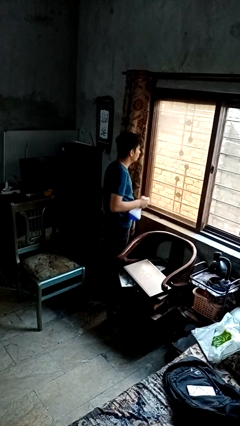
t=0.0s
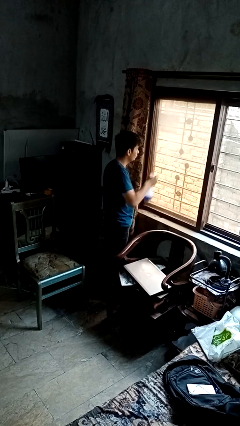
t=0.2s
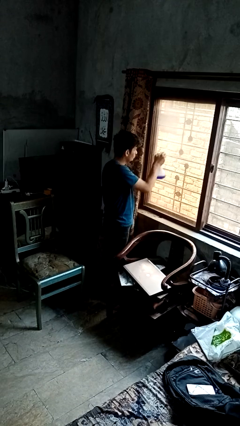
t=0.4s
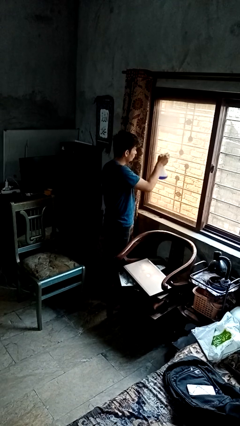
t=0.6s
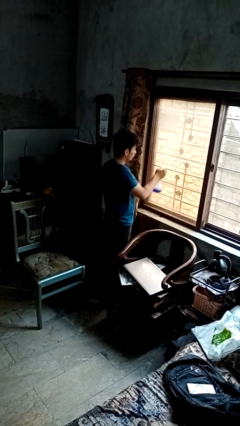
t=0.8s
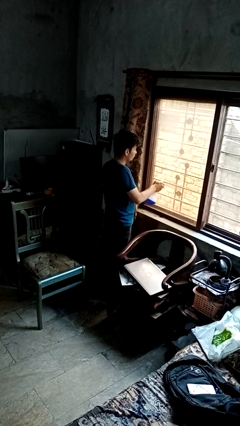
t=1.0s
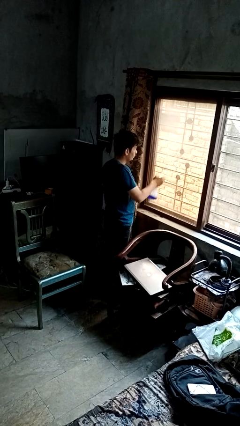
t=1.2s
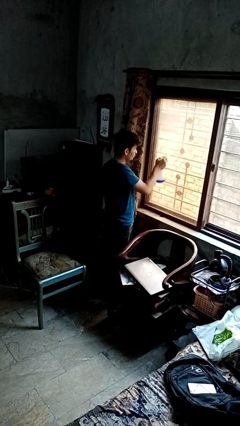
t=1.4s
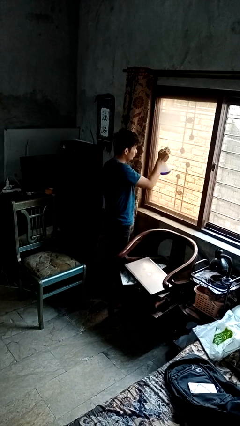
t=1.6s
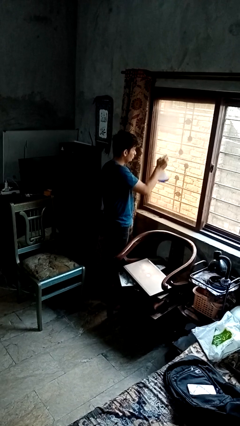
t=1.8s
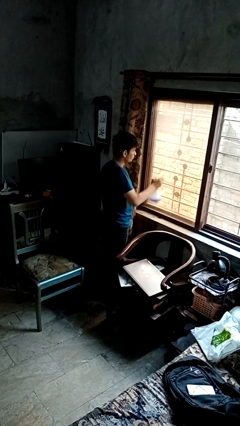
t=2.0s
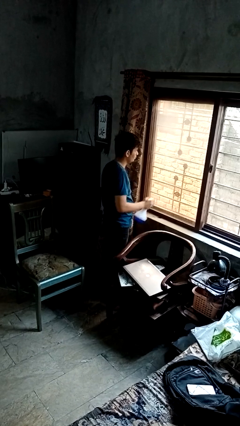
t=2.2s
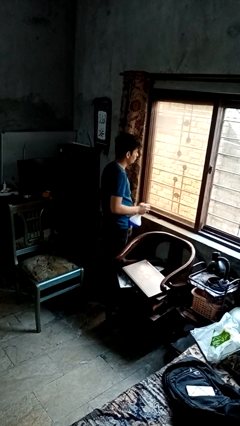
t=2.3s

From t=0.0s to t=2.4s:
person sprays from bottle

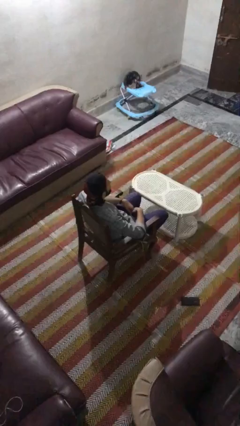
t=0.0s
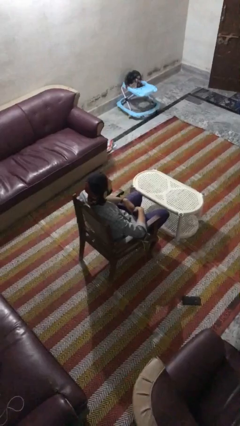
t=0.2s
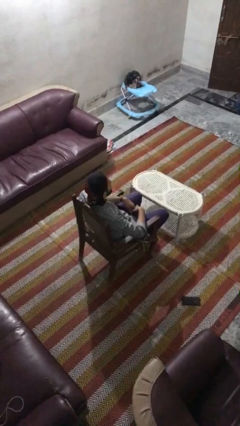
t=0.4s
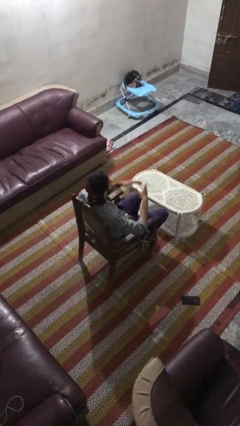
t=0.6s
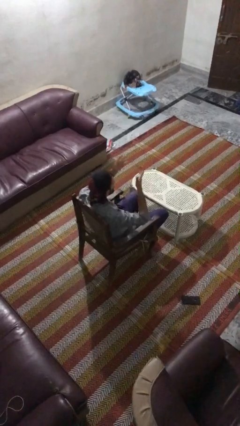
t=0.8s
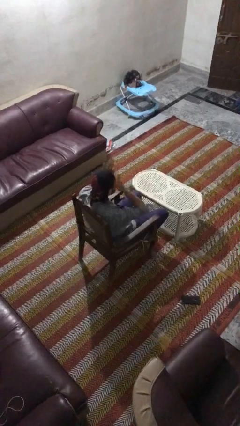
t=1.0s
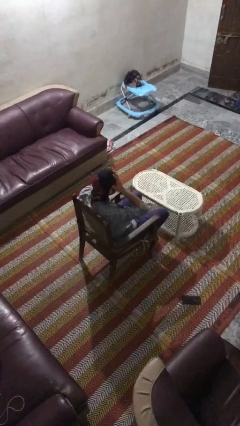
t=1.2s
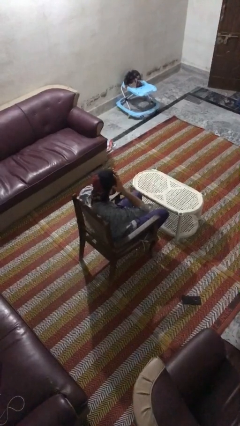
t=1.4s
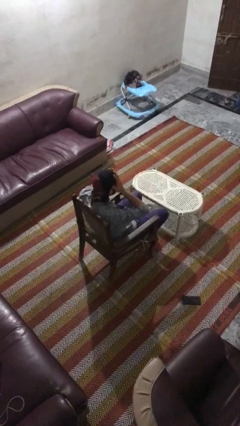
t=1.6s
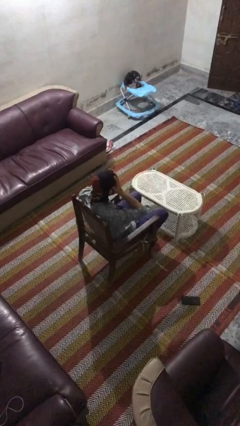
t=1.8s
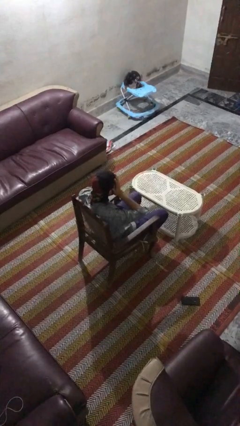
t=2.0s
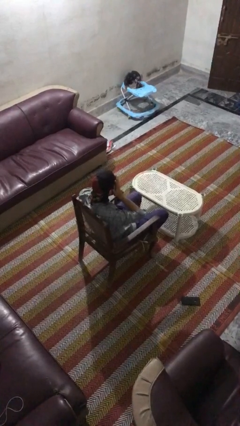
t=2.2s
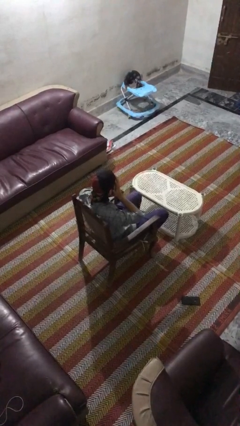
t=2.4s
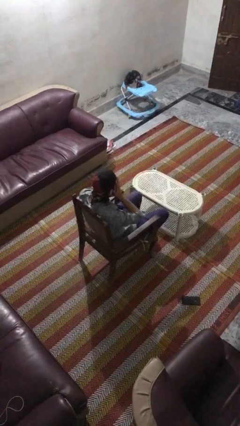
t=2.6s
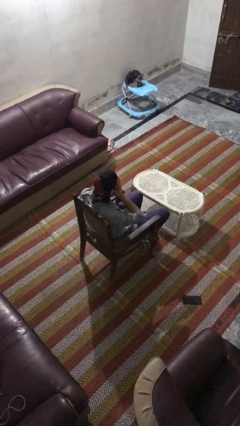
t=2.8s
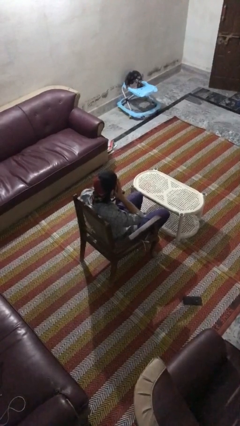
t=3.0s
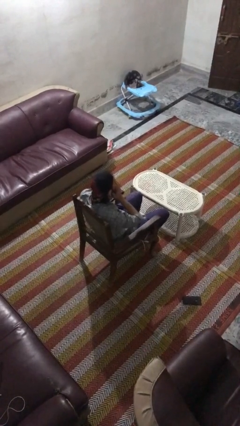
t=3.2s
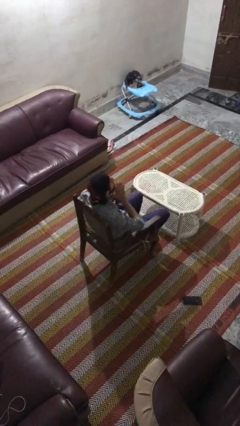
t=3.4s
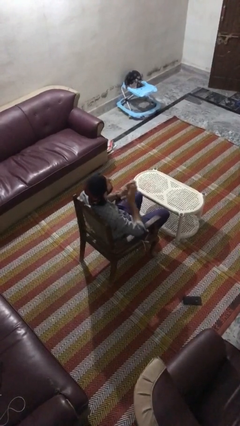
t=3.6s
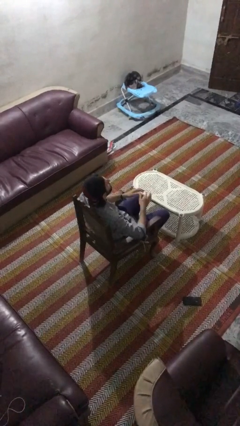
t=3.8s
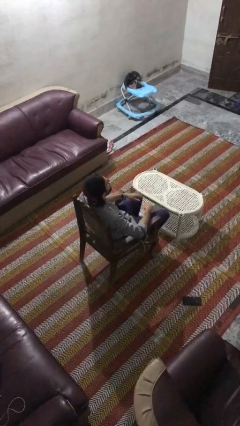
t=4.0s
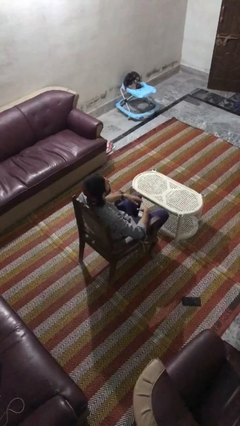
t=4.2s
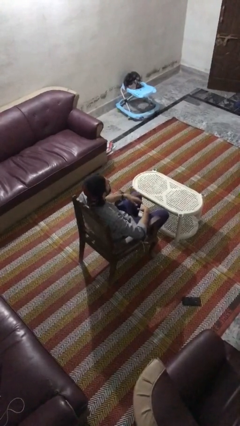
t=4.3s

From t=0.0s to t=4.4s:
person covers face with hands

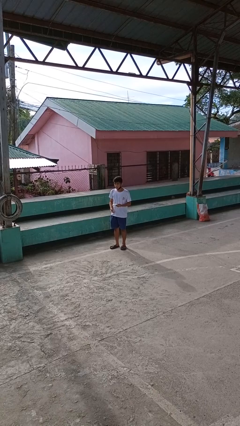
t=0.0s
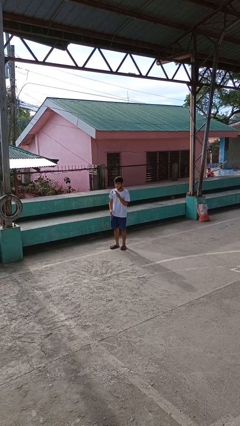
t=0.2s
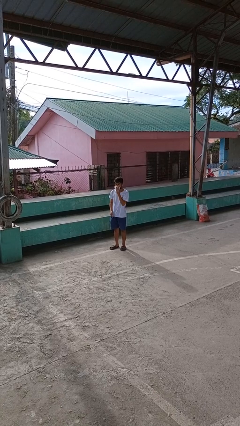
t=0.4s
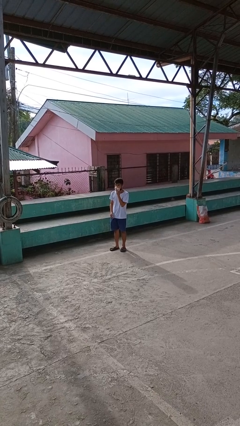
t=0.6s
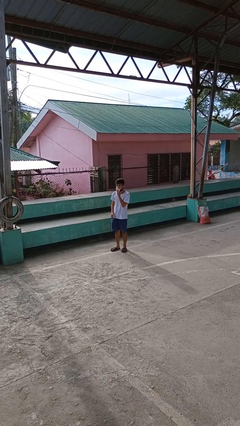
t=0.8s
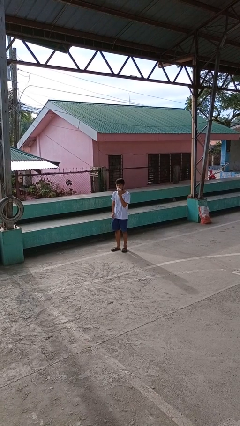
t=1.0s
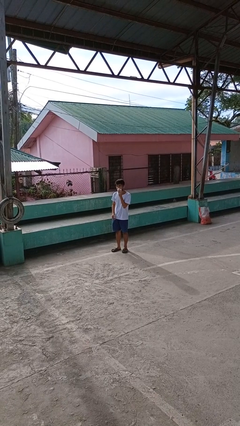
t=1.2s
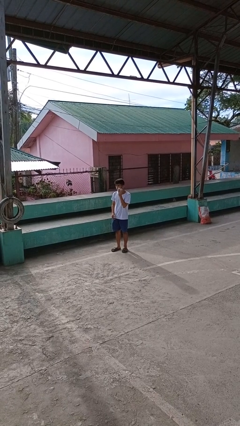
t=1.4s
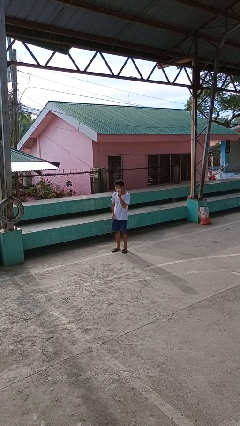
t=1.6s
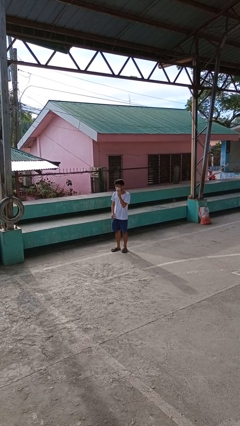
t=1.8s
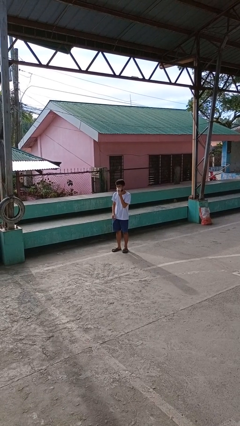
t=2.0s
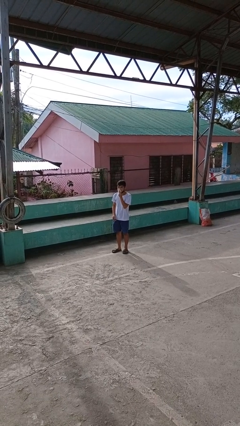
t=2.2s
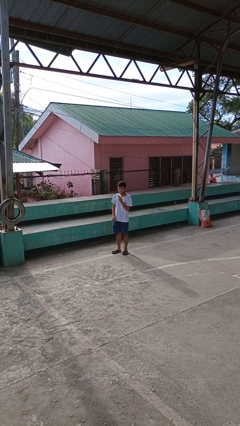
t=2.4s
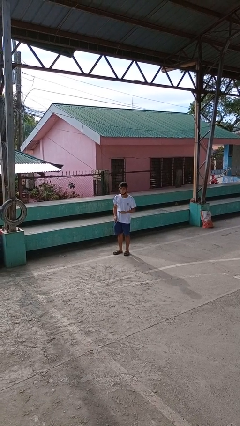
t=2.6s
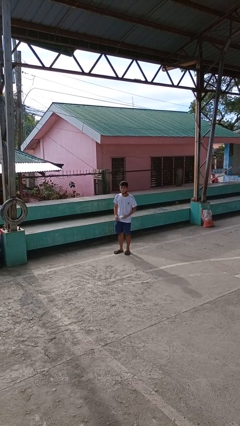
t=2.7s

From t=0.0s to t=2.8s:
person wipes mouth with napkin

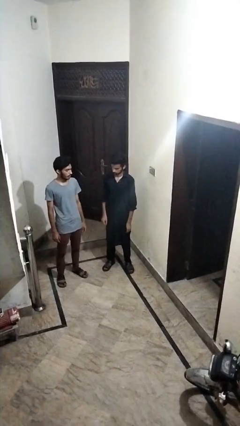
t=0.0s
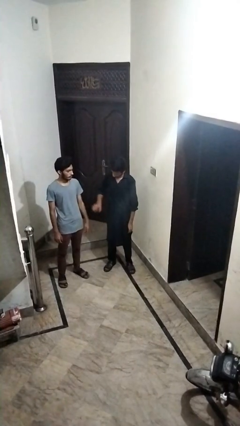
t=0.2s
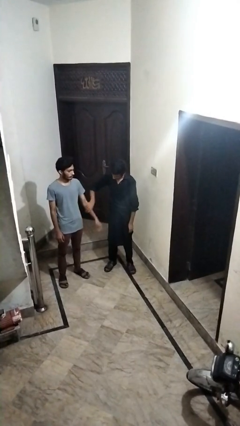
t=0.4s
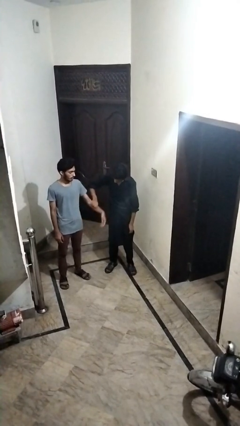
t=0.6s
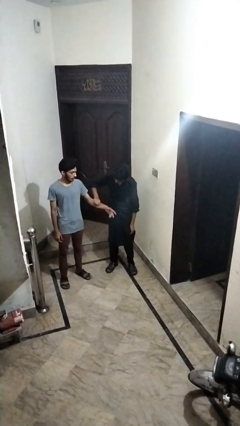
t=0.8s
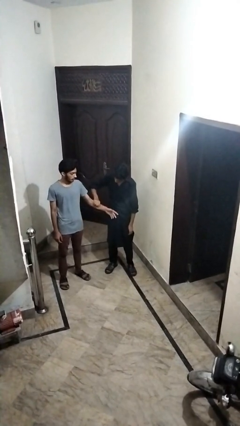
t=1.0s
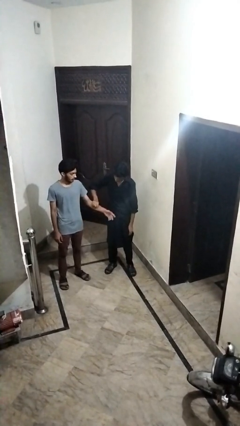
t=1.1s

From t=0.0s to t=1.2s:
person grabs person by forearm

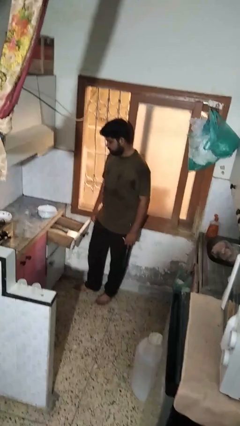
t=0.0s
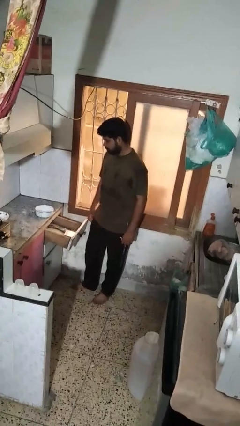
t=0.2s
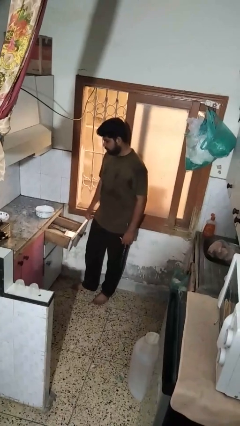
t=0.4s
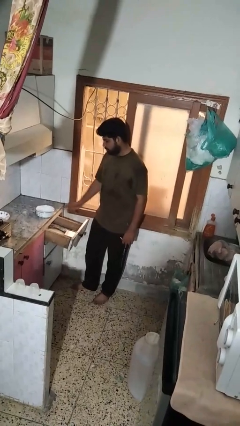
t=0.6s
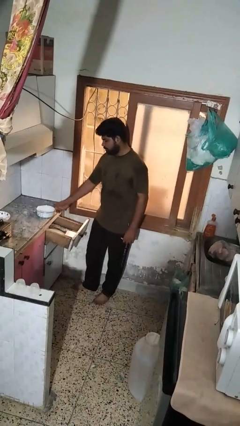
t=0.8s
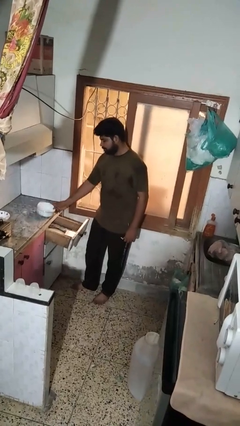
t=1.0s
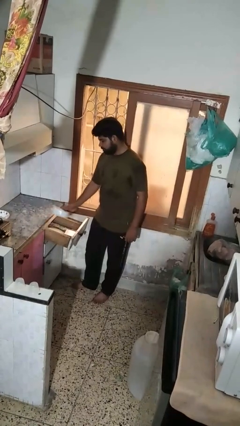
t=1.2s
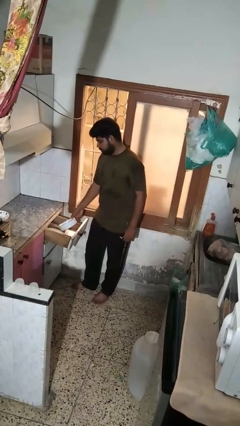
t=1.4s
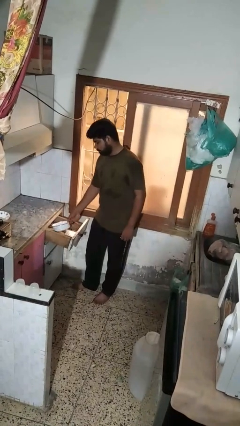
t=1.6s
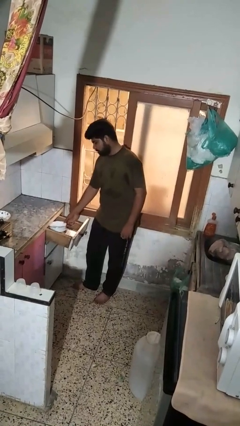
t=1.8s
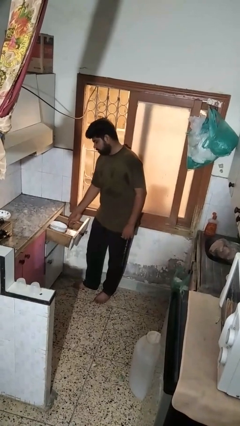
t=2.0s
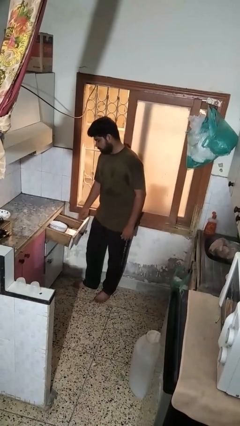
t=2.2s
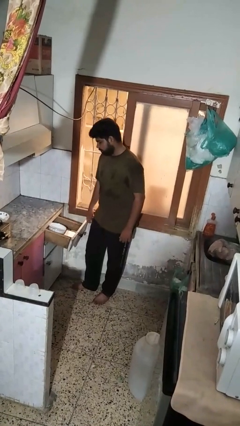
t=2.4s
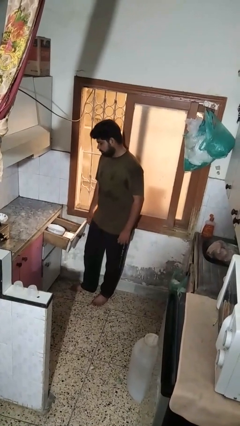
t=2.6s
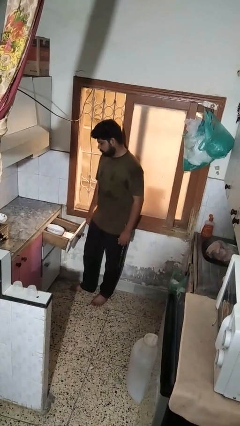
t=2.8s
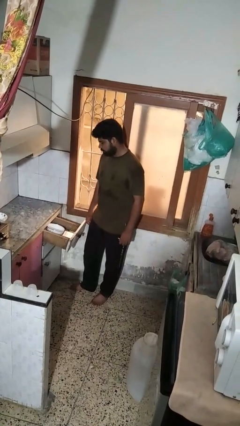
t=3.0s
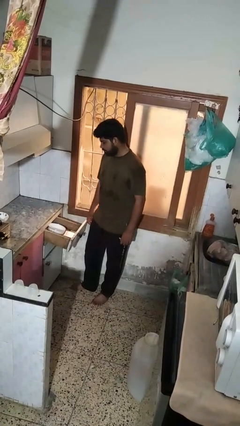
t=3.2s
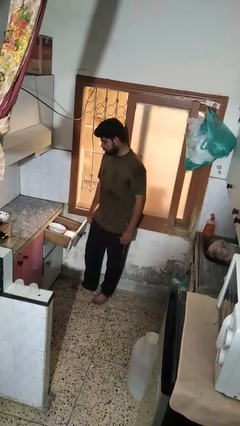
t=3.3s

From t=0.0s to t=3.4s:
person puts object into kitchen drawer

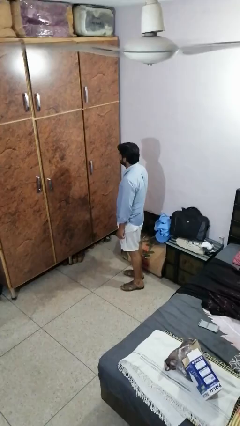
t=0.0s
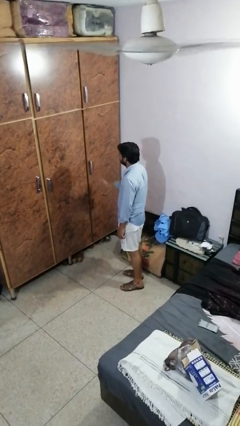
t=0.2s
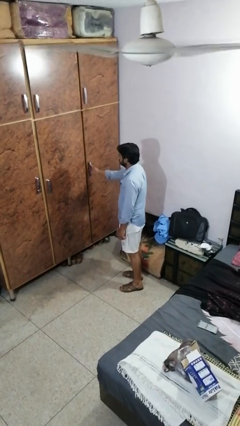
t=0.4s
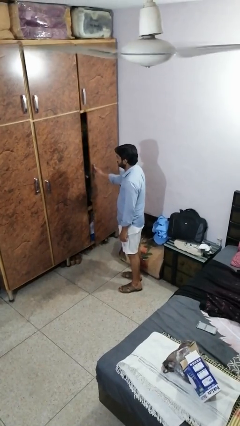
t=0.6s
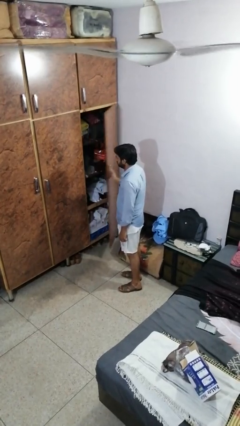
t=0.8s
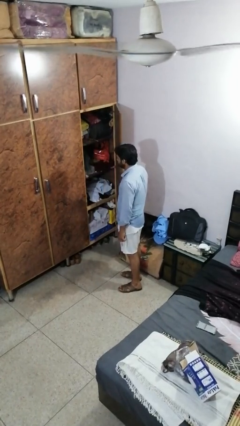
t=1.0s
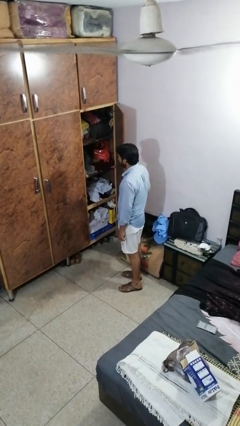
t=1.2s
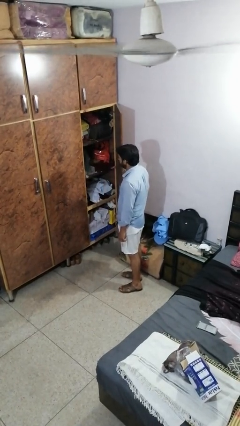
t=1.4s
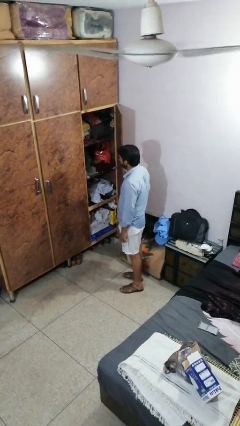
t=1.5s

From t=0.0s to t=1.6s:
person opens closet door

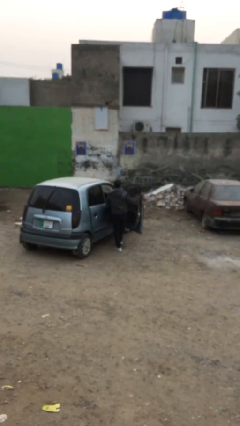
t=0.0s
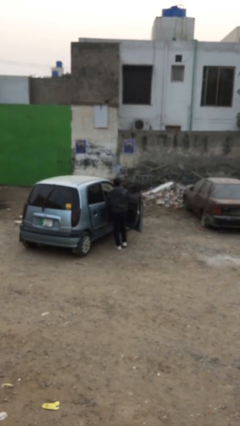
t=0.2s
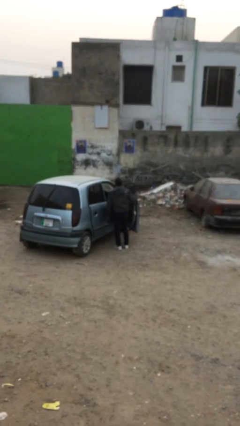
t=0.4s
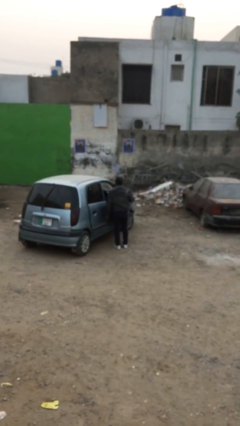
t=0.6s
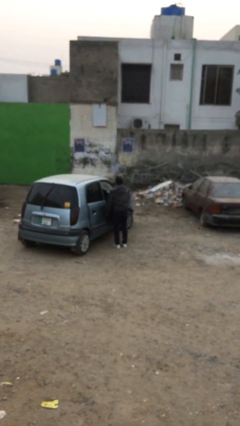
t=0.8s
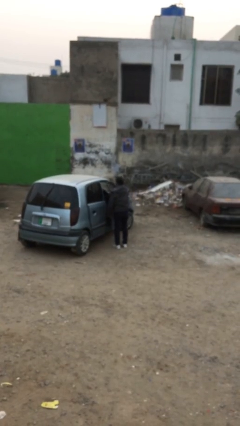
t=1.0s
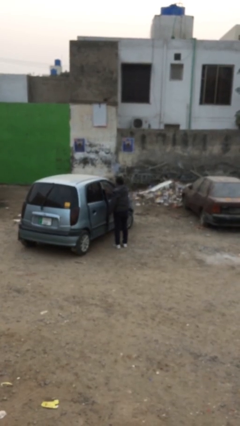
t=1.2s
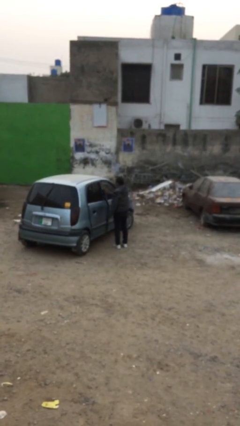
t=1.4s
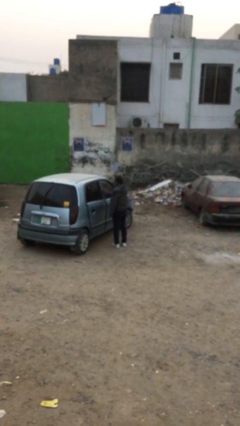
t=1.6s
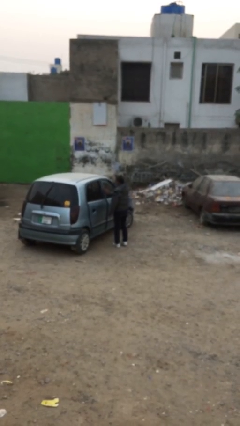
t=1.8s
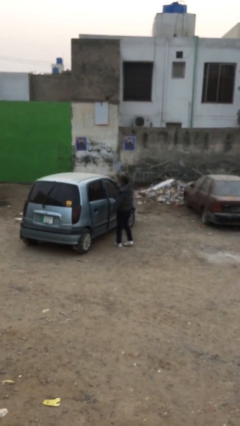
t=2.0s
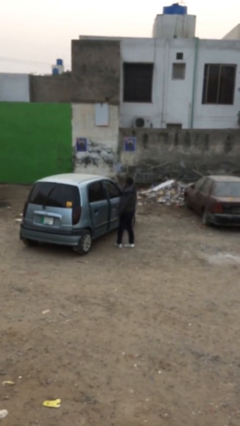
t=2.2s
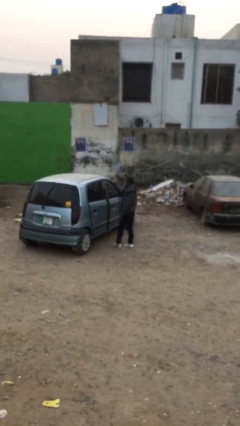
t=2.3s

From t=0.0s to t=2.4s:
person closes car door
